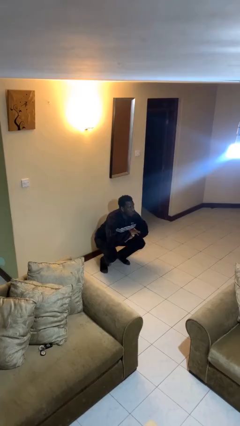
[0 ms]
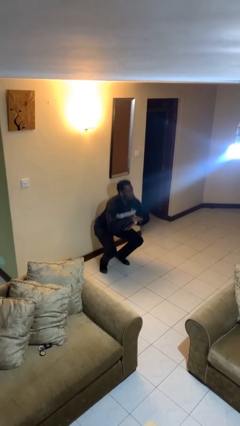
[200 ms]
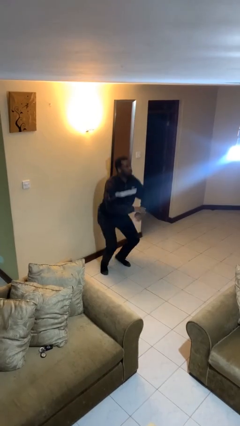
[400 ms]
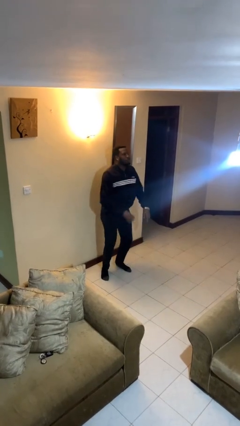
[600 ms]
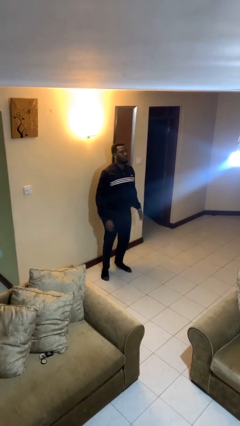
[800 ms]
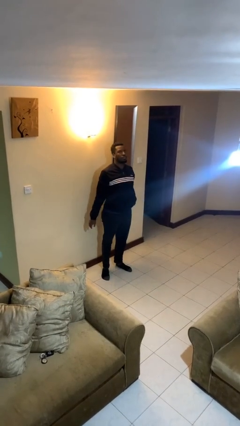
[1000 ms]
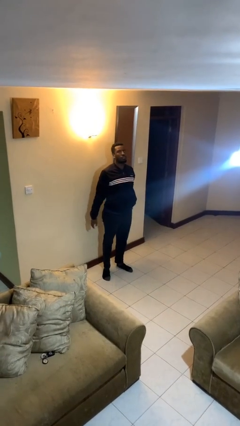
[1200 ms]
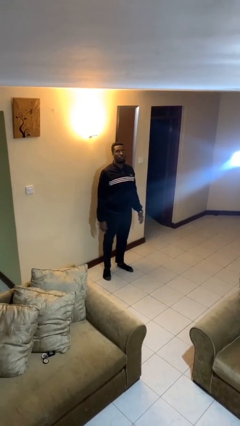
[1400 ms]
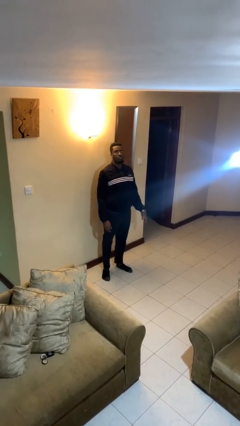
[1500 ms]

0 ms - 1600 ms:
person stands up

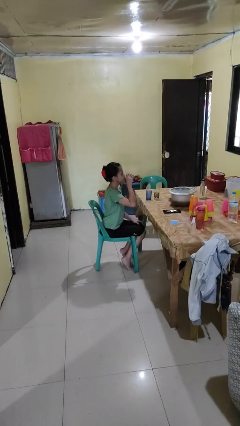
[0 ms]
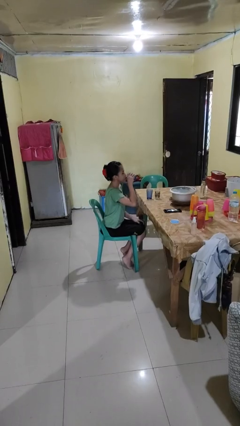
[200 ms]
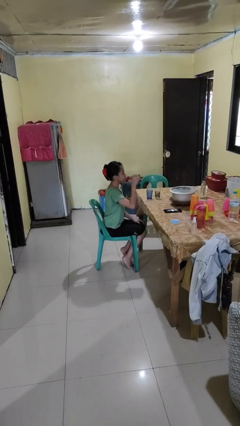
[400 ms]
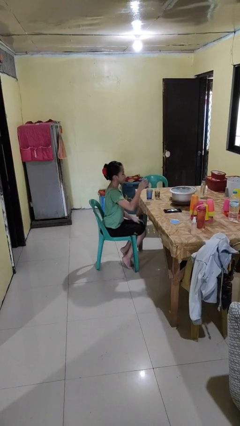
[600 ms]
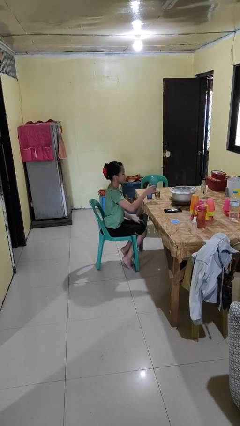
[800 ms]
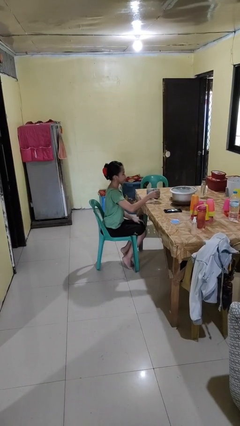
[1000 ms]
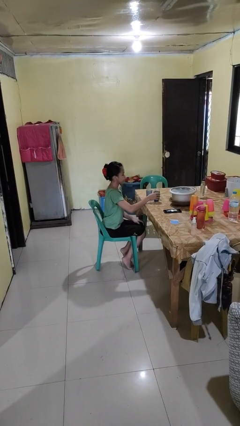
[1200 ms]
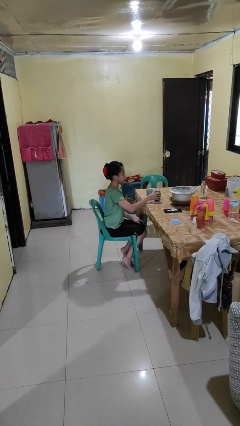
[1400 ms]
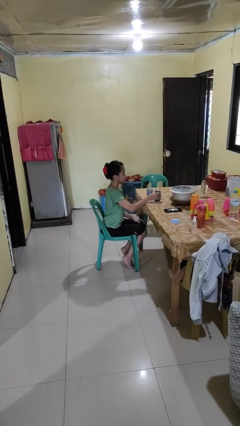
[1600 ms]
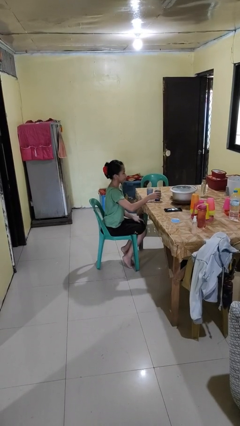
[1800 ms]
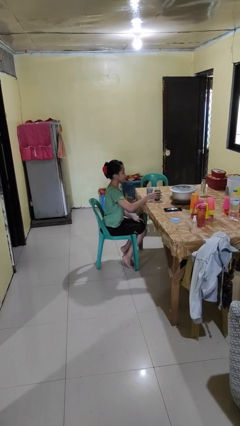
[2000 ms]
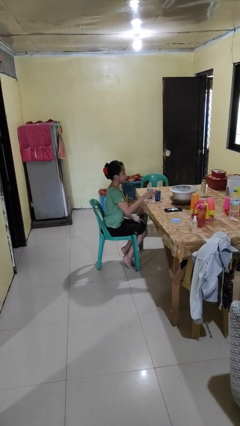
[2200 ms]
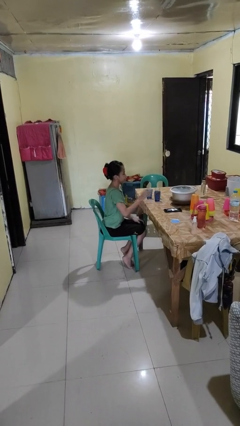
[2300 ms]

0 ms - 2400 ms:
person puts down object on table

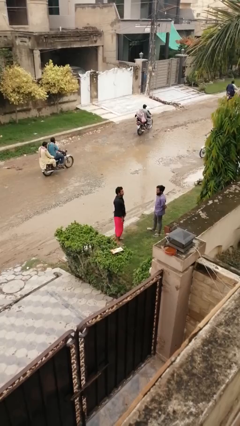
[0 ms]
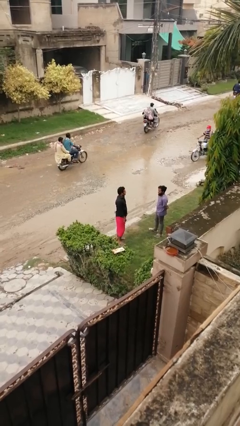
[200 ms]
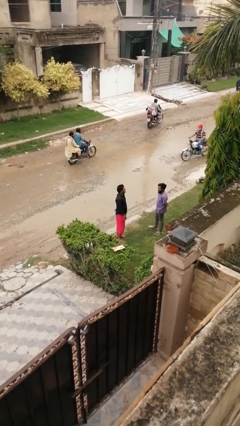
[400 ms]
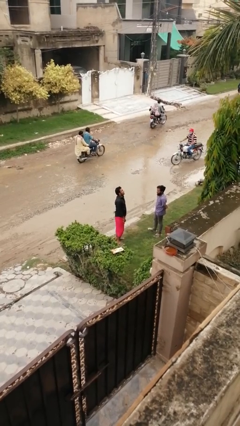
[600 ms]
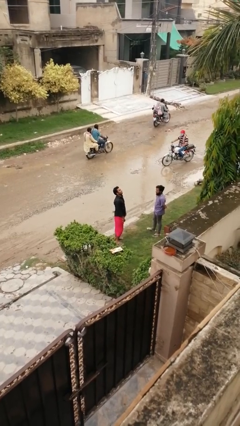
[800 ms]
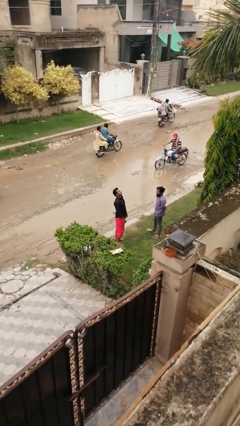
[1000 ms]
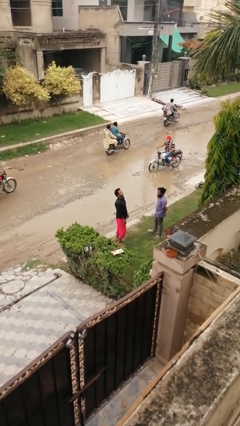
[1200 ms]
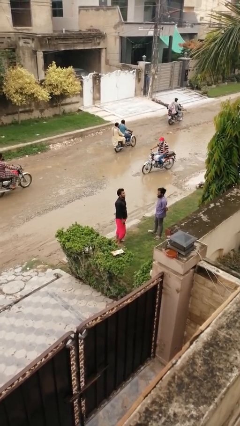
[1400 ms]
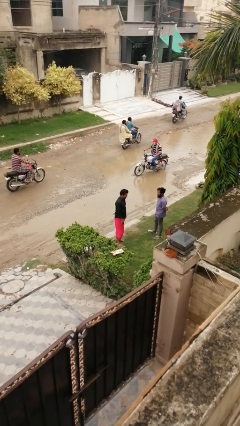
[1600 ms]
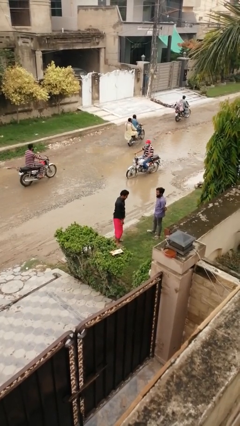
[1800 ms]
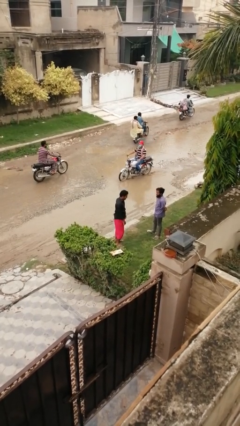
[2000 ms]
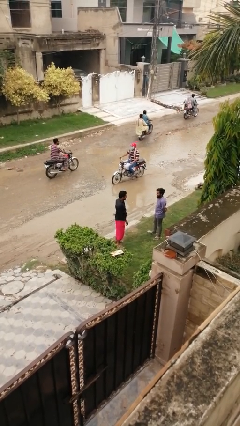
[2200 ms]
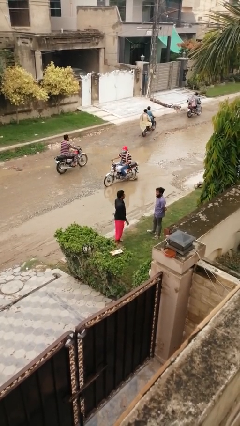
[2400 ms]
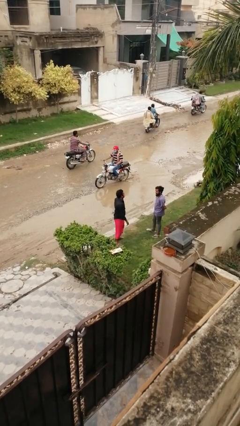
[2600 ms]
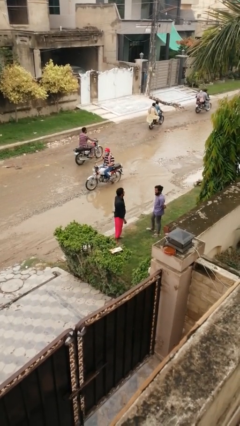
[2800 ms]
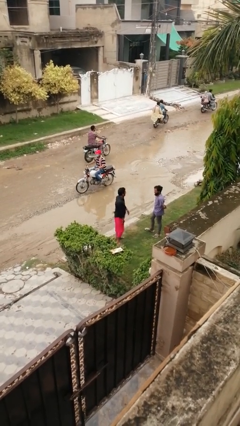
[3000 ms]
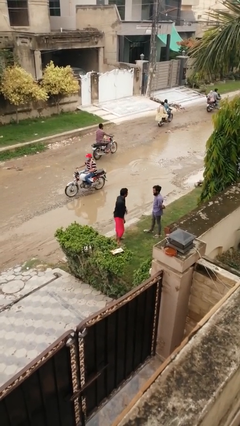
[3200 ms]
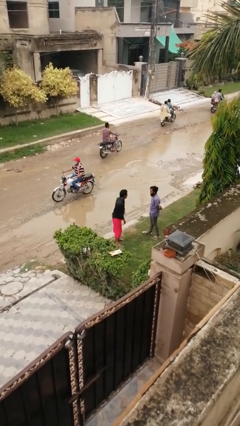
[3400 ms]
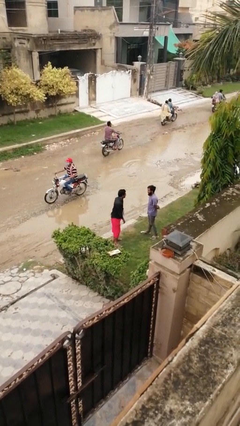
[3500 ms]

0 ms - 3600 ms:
person laughs with person

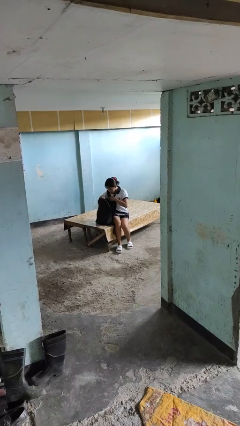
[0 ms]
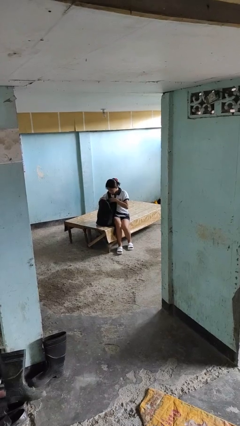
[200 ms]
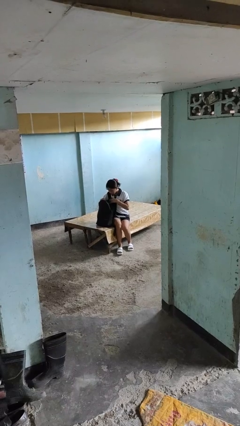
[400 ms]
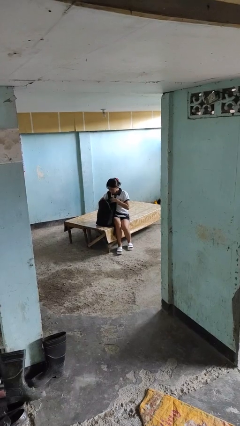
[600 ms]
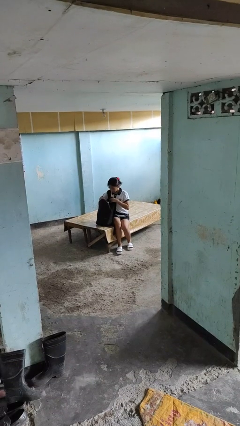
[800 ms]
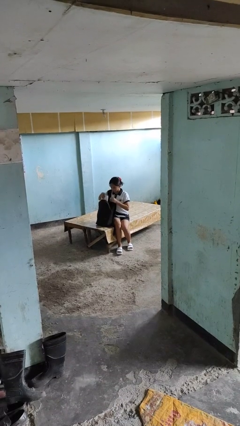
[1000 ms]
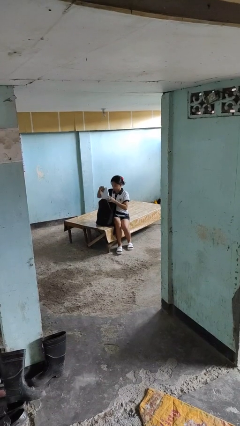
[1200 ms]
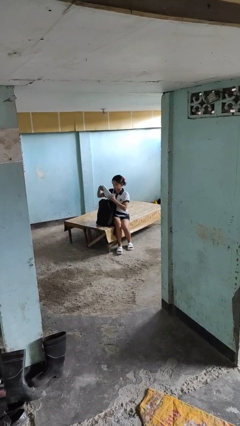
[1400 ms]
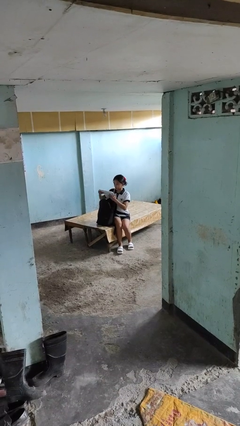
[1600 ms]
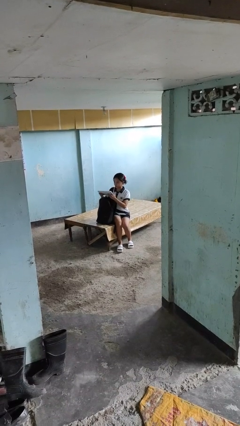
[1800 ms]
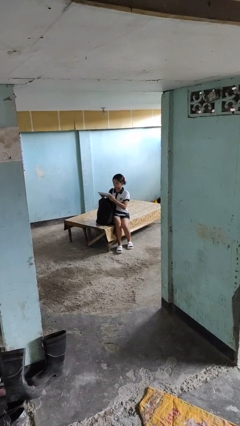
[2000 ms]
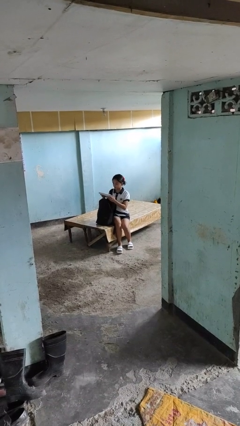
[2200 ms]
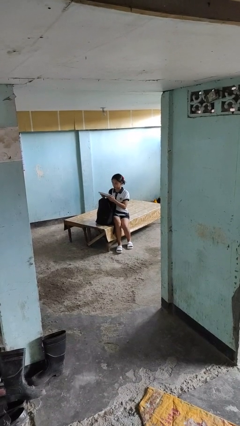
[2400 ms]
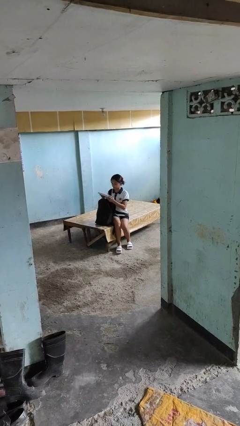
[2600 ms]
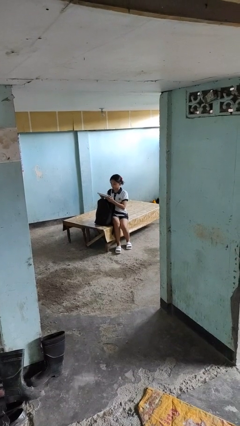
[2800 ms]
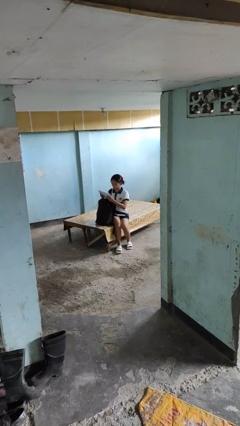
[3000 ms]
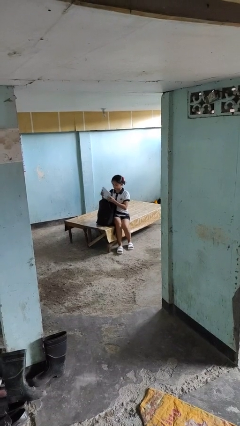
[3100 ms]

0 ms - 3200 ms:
person takes object from backpack

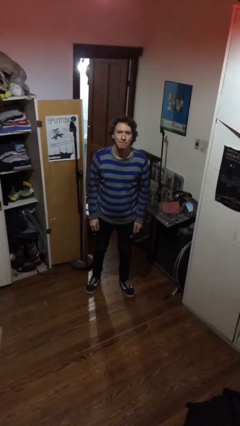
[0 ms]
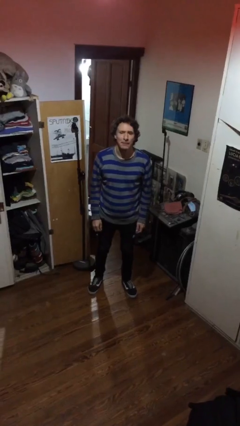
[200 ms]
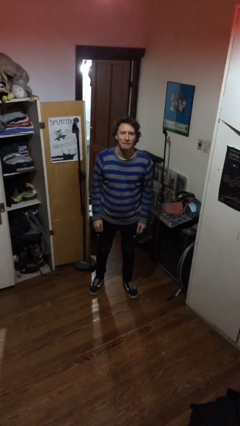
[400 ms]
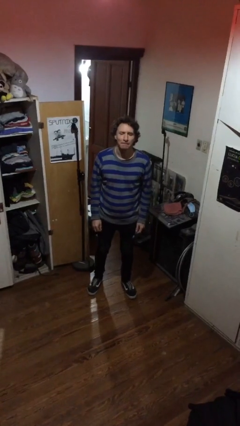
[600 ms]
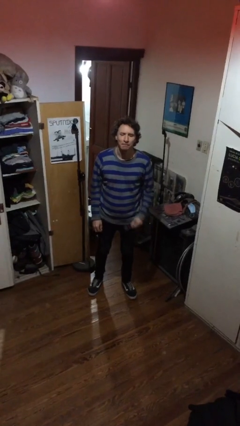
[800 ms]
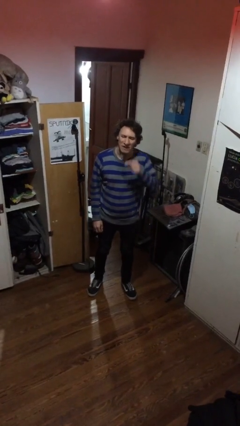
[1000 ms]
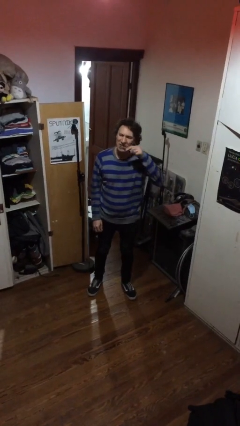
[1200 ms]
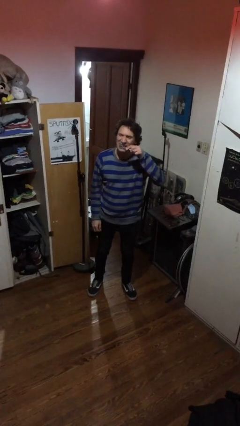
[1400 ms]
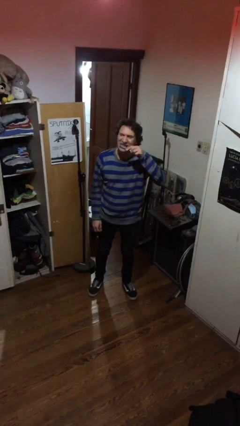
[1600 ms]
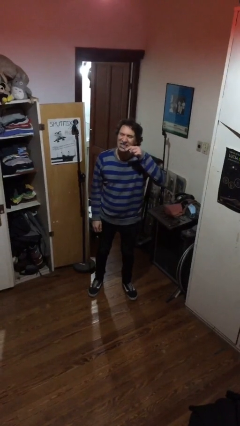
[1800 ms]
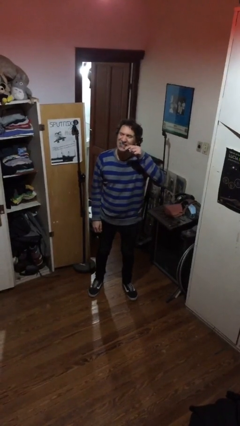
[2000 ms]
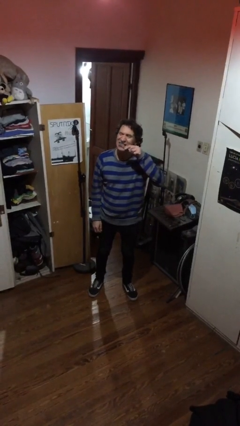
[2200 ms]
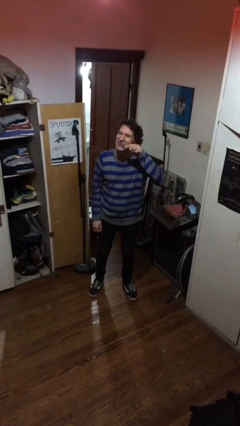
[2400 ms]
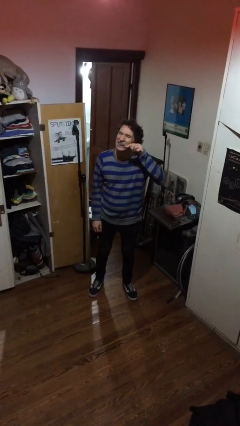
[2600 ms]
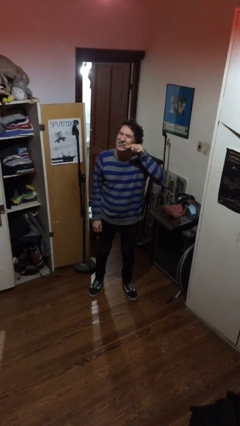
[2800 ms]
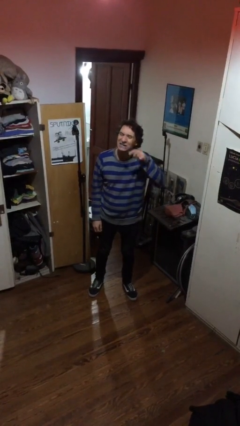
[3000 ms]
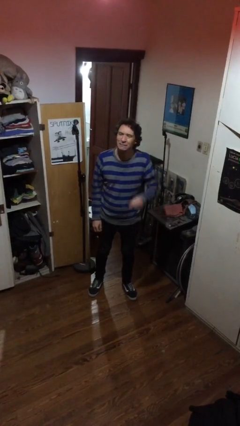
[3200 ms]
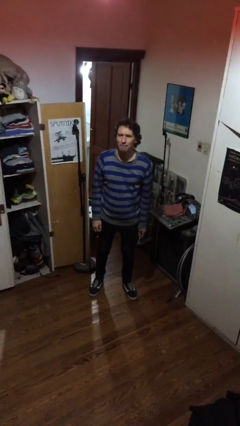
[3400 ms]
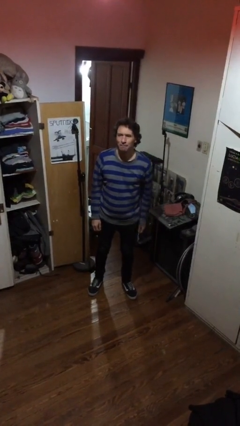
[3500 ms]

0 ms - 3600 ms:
person brushes teeth

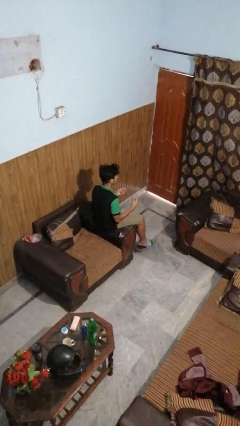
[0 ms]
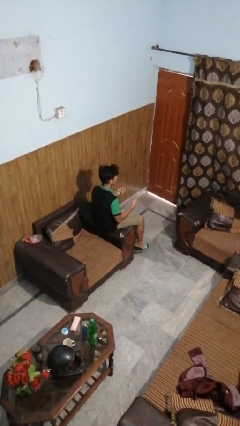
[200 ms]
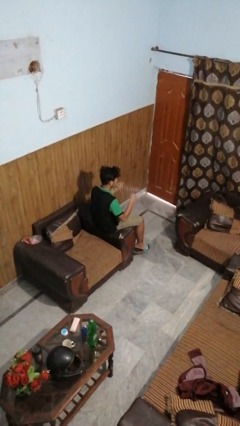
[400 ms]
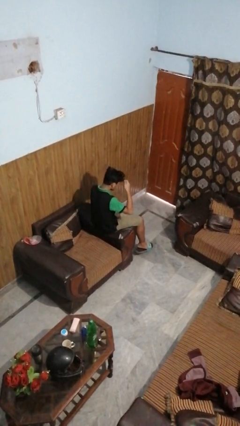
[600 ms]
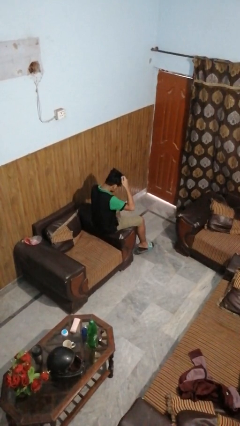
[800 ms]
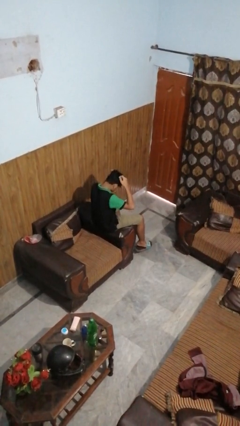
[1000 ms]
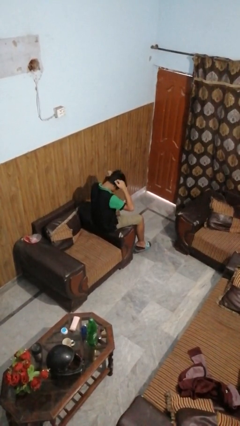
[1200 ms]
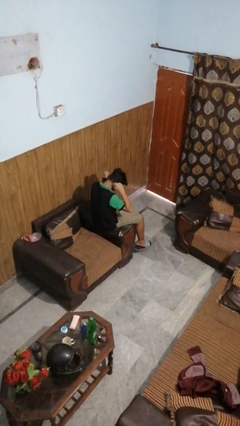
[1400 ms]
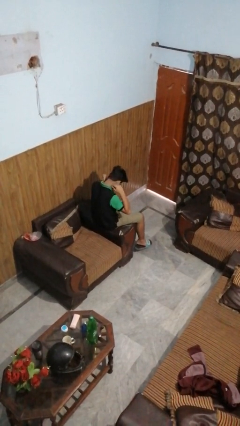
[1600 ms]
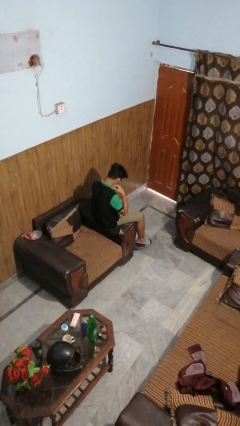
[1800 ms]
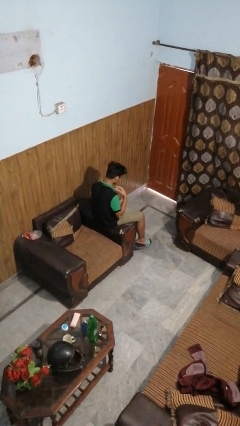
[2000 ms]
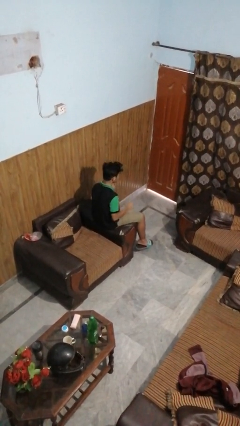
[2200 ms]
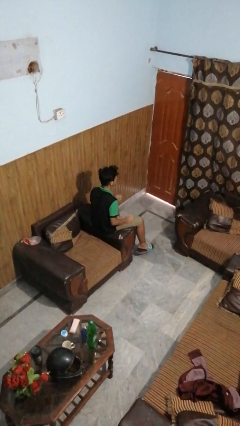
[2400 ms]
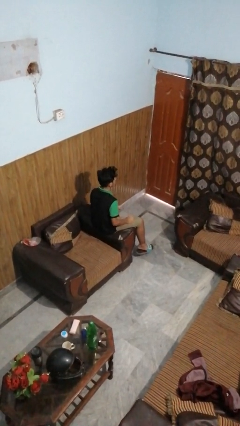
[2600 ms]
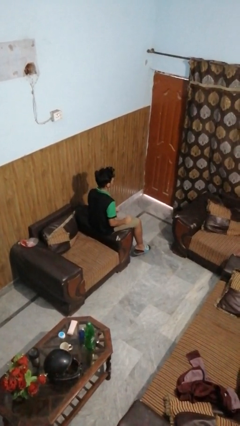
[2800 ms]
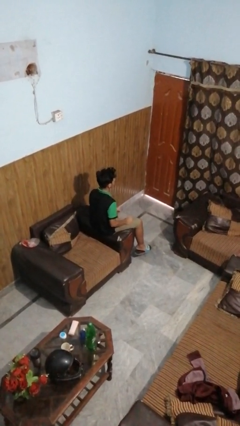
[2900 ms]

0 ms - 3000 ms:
person puts on necklace
